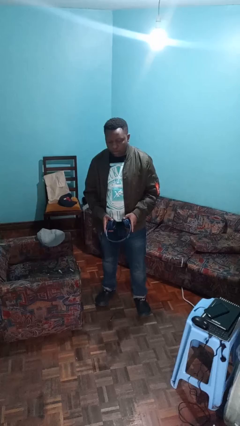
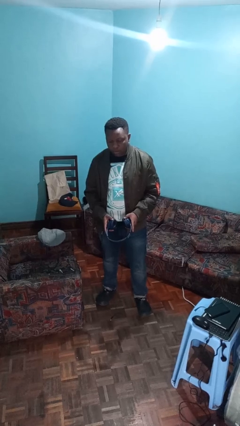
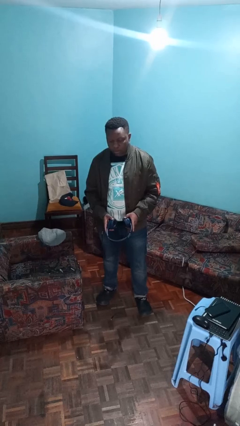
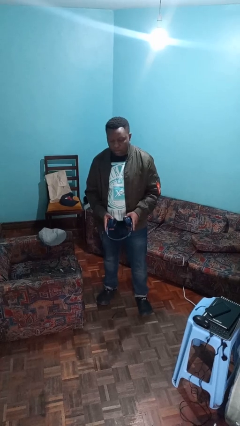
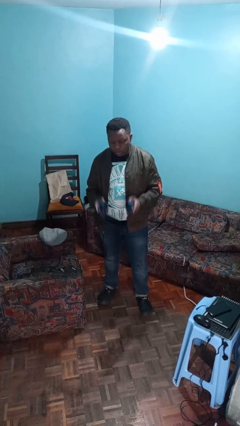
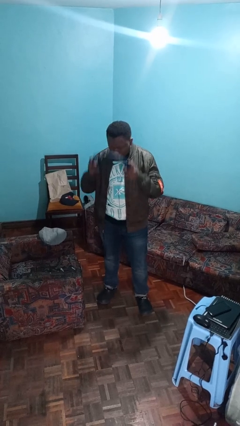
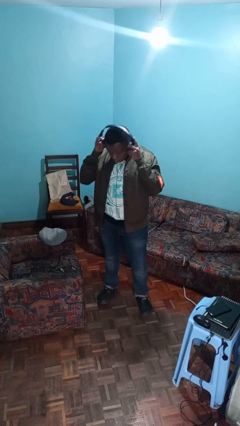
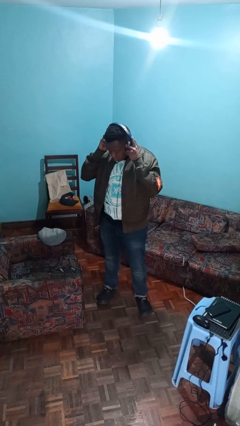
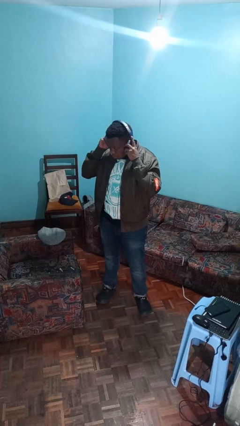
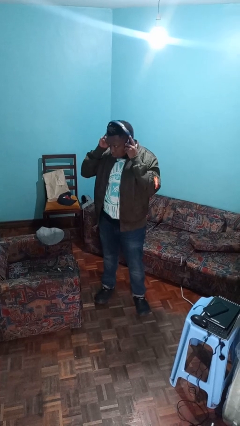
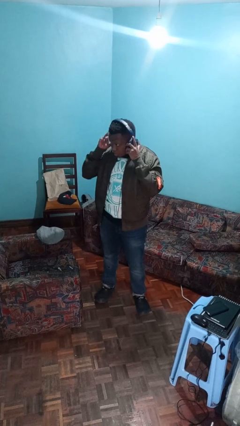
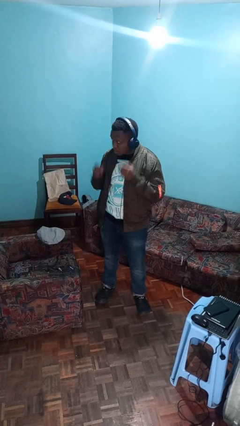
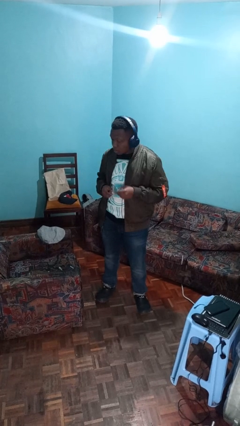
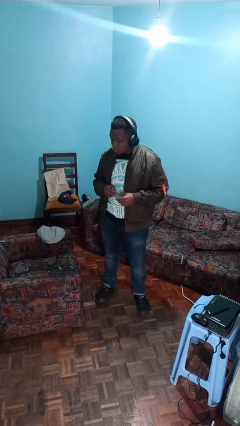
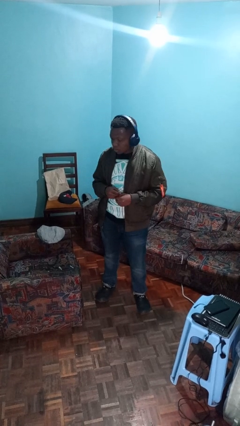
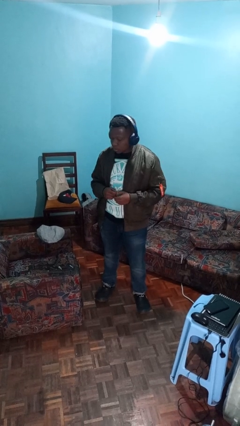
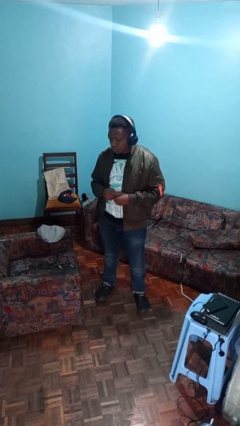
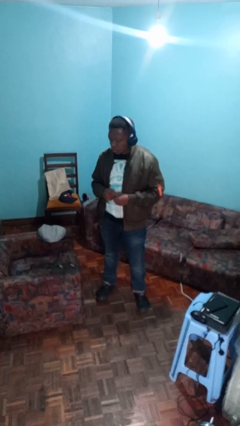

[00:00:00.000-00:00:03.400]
person puts on headphones

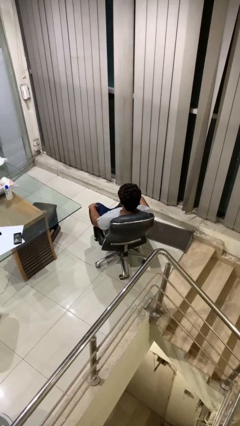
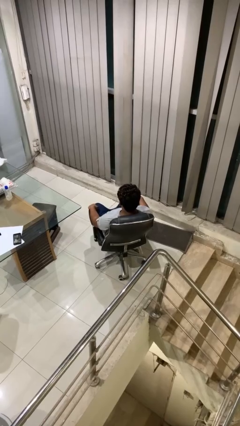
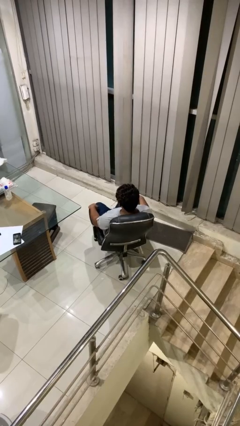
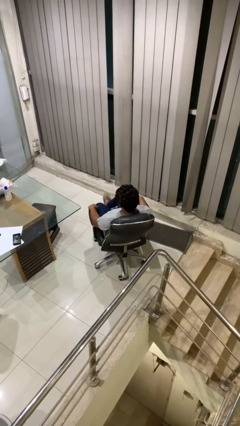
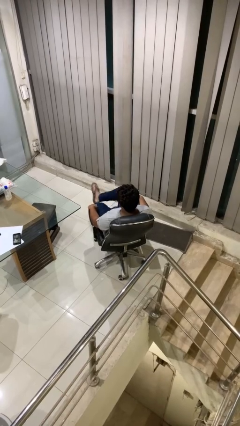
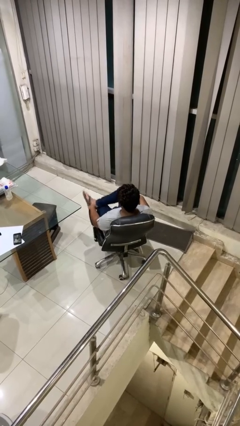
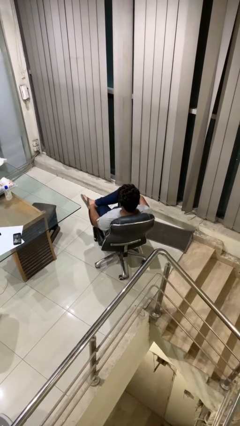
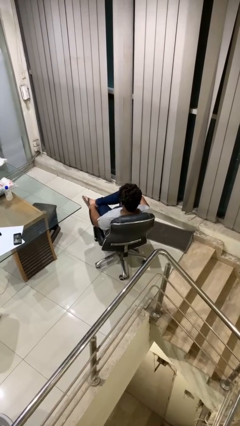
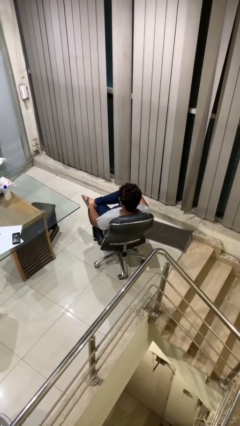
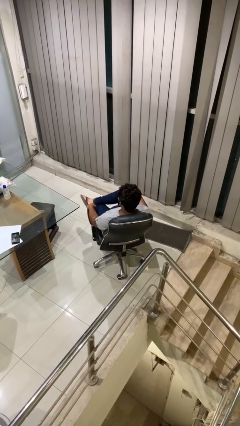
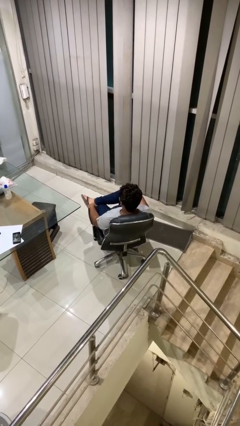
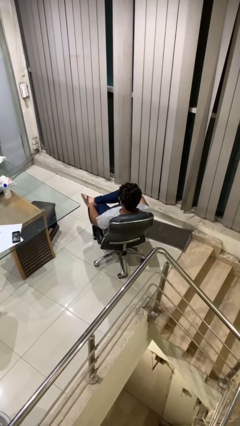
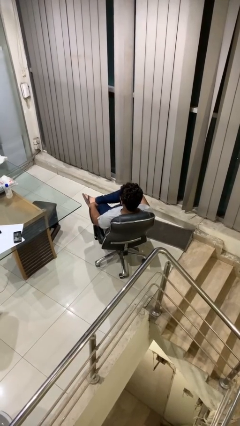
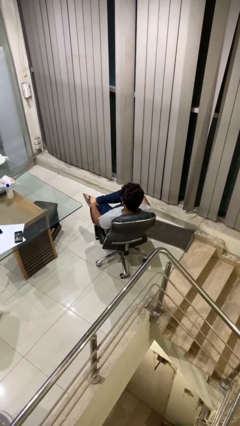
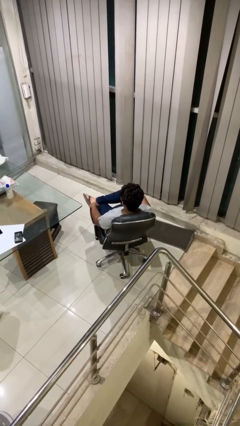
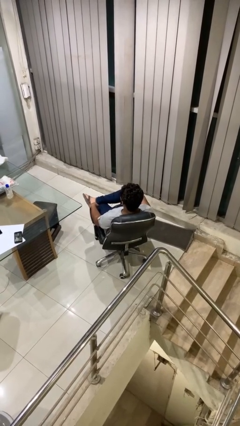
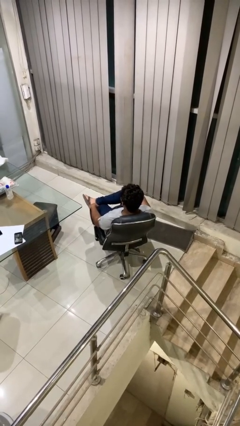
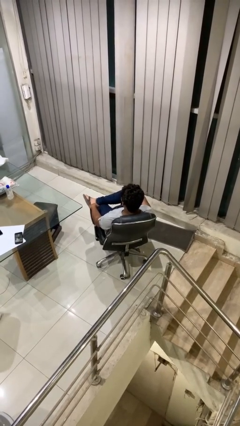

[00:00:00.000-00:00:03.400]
person crosses legs

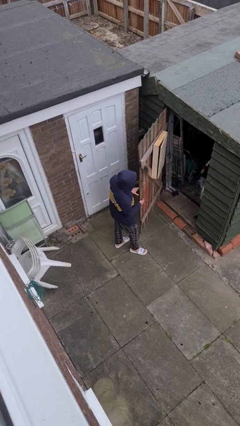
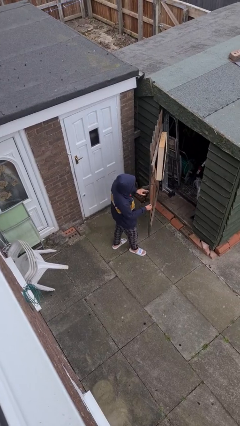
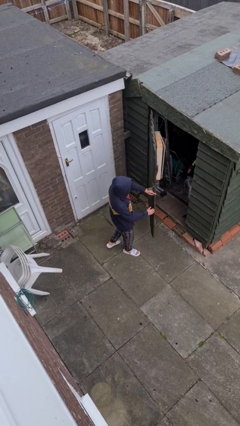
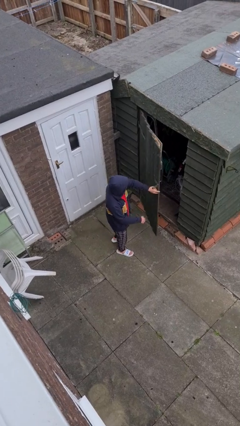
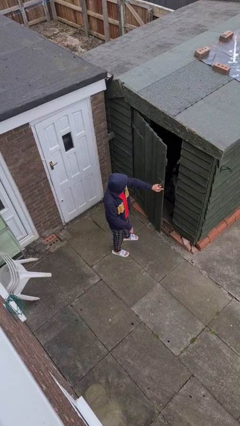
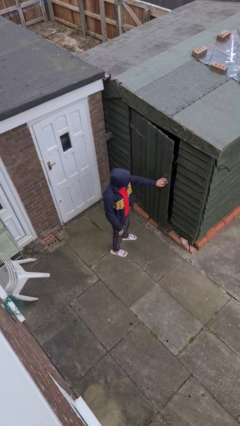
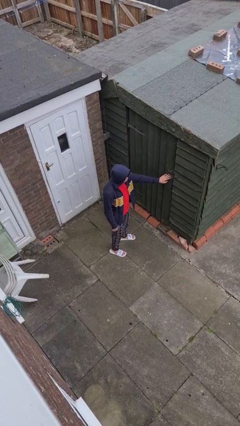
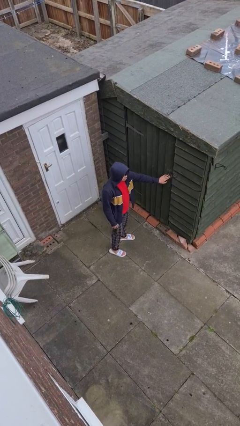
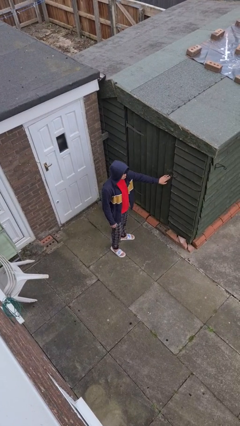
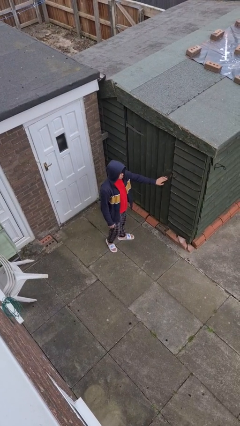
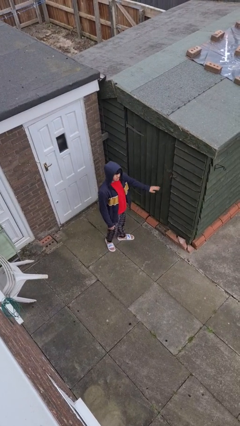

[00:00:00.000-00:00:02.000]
person closes facility door

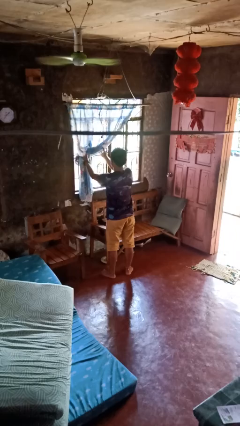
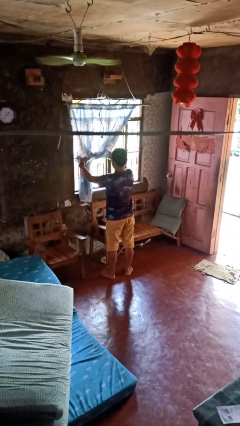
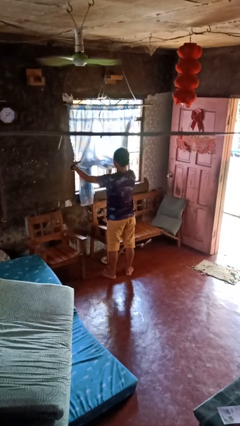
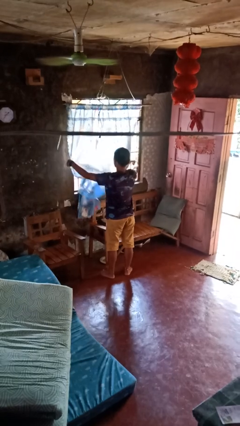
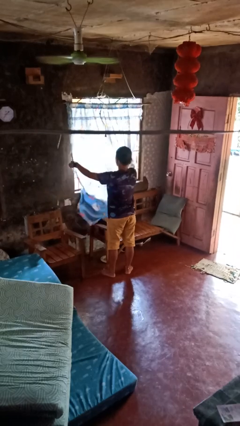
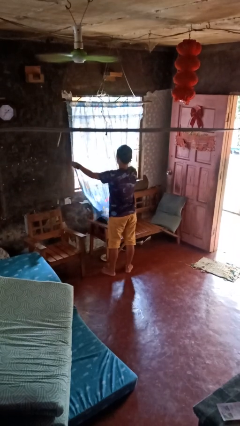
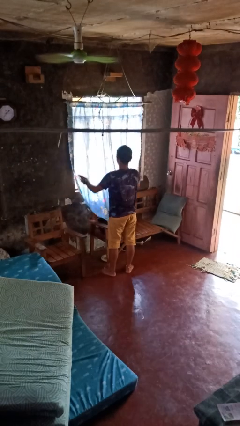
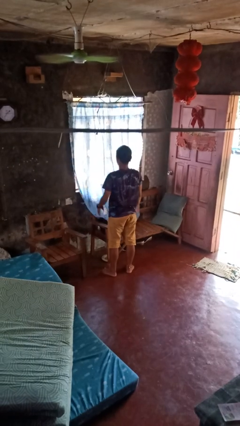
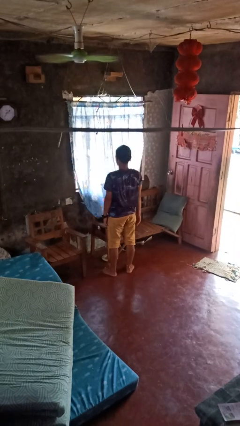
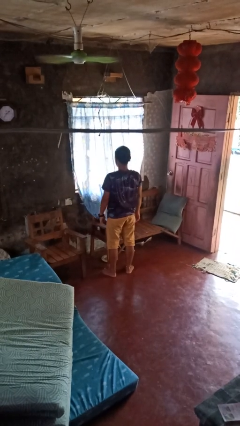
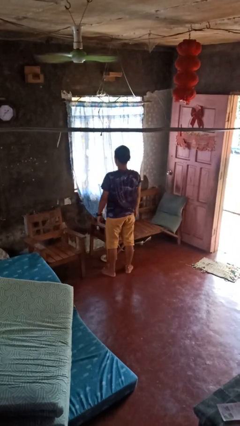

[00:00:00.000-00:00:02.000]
person closes curtains

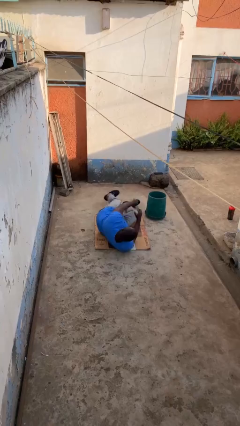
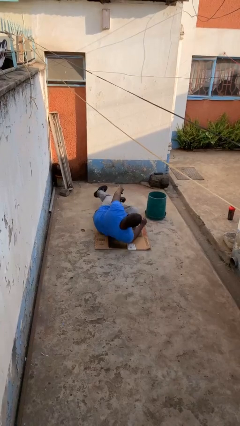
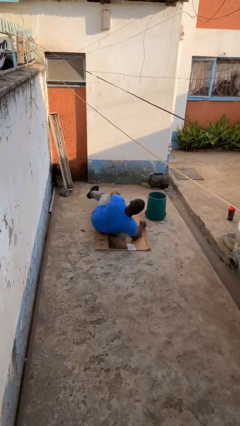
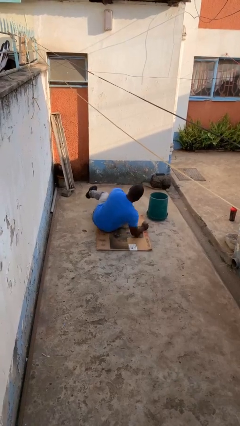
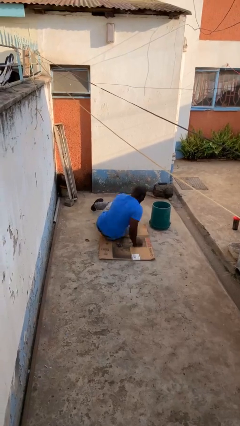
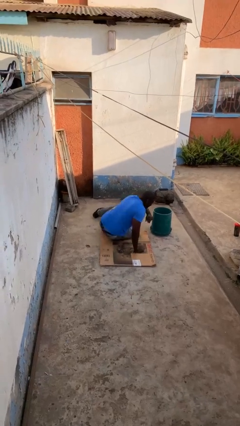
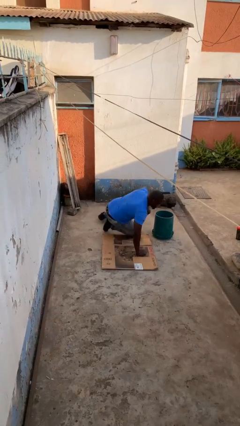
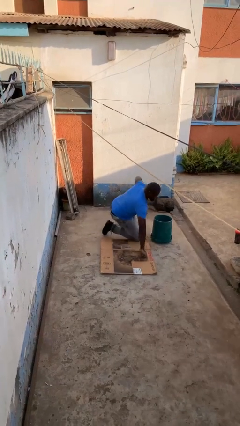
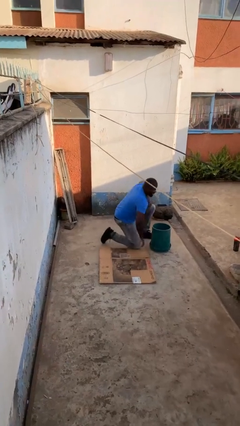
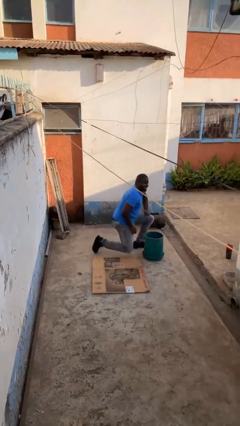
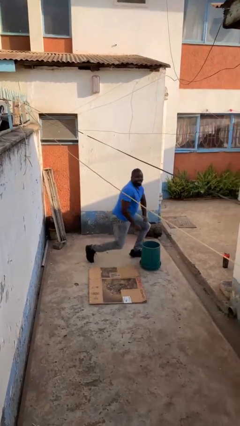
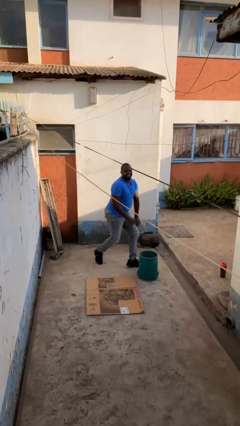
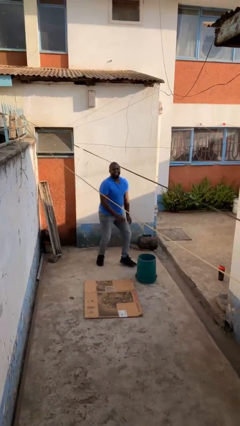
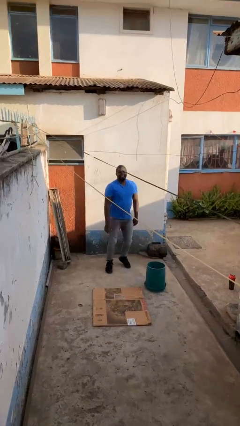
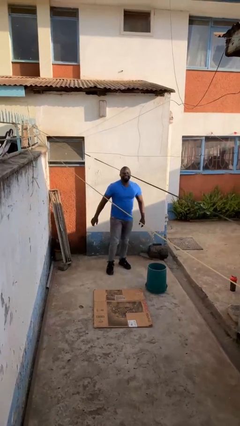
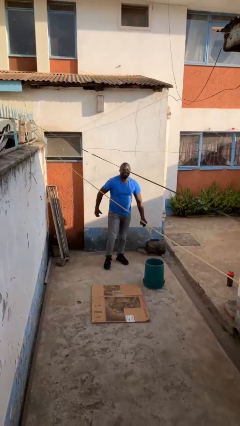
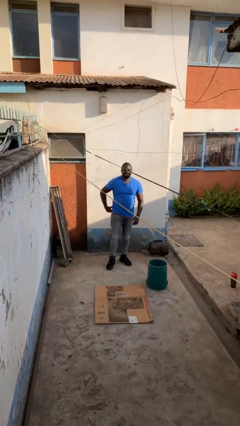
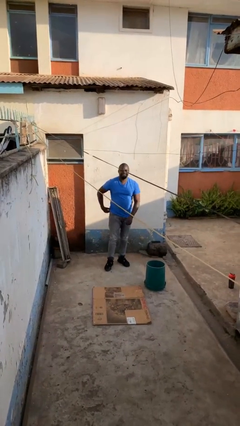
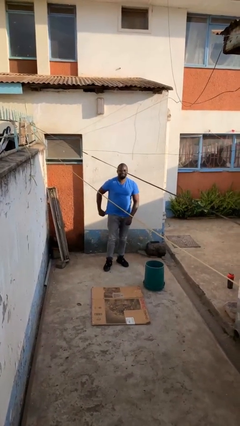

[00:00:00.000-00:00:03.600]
person stands up from floor

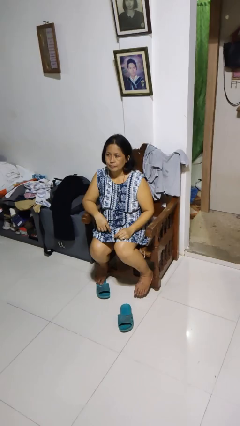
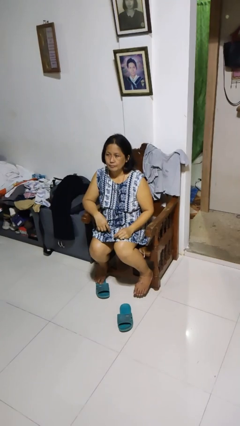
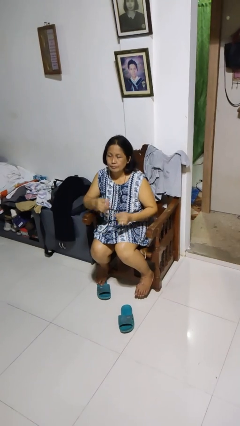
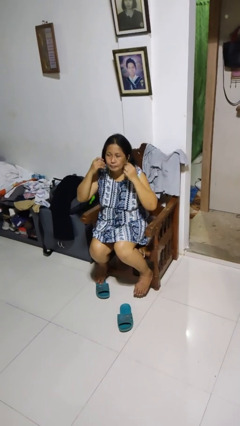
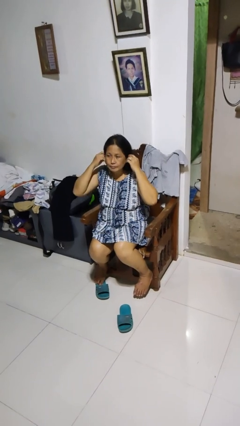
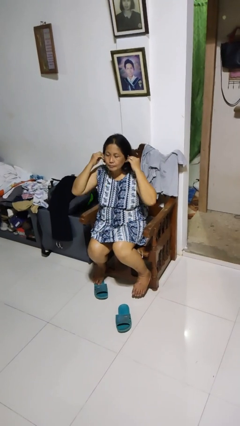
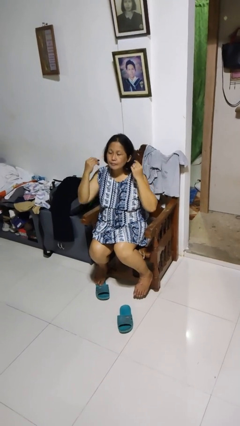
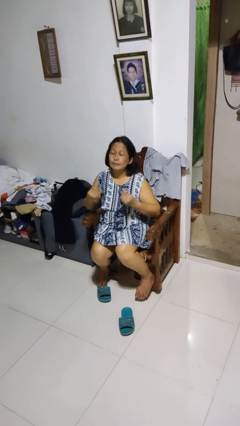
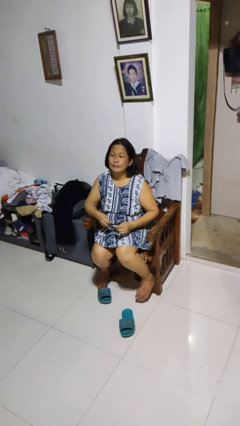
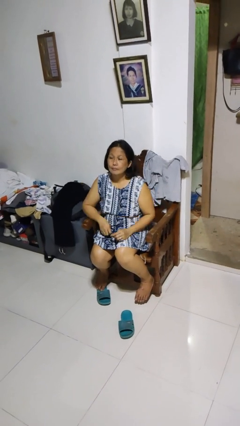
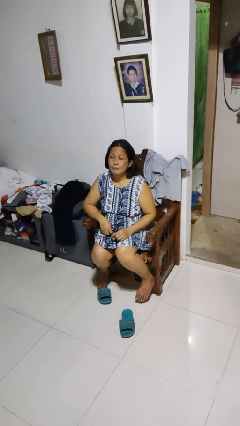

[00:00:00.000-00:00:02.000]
person takes off headphones

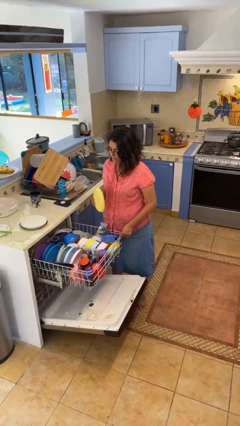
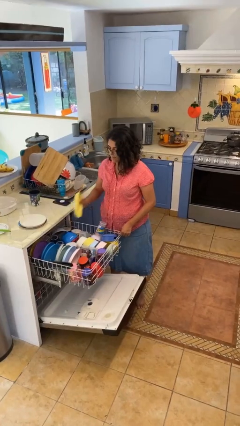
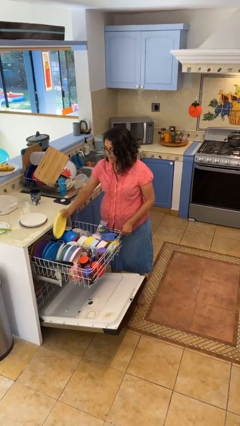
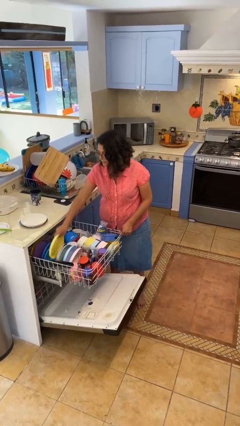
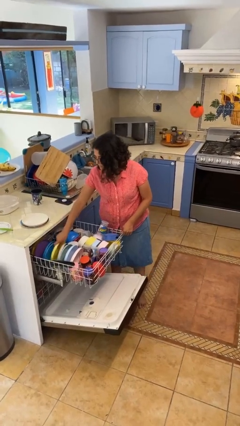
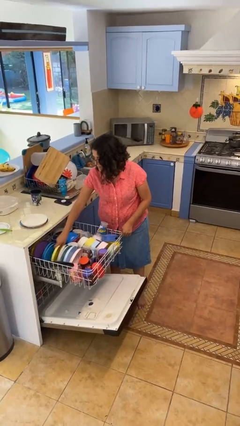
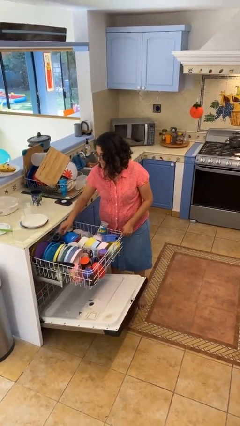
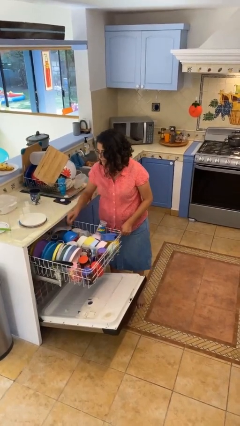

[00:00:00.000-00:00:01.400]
person loads dishwasher
